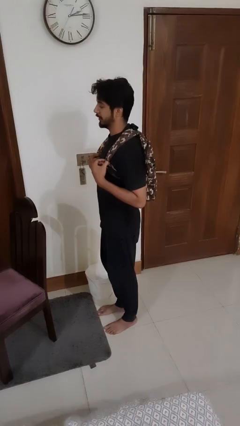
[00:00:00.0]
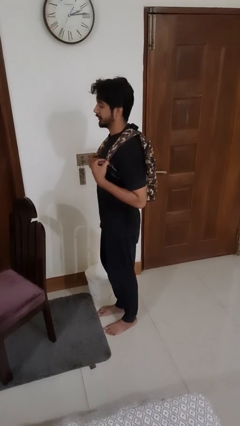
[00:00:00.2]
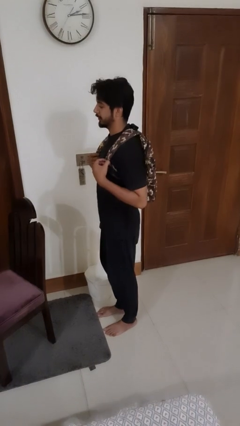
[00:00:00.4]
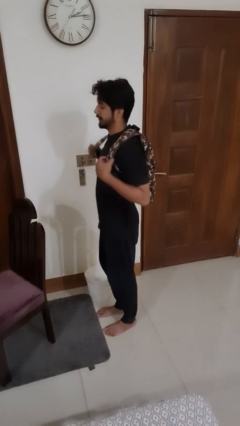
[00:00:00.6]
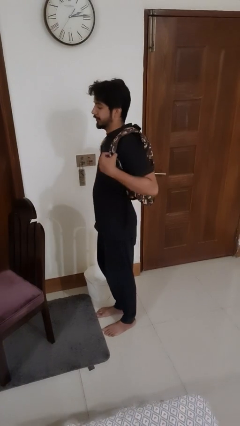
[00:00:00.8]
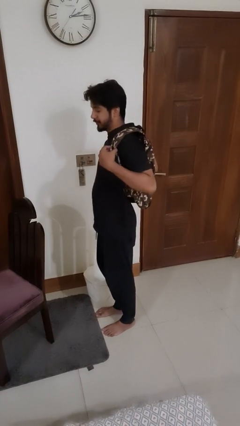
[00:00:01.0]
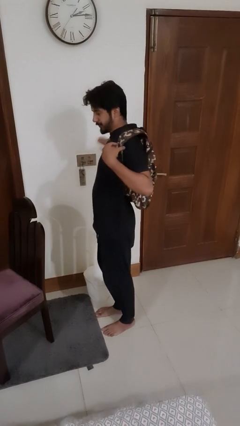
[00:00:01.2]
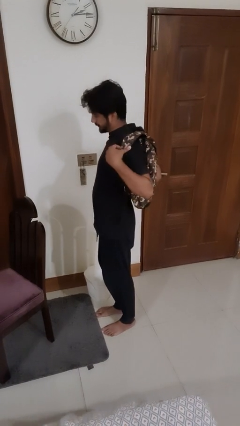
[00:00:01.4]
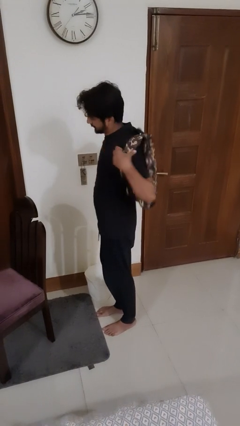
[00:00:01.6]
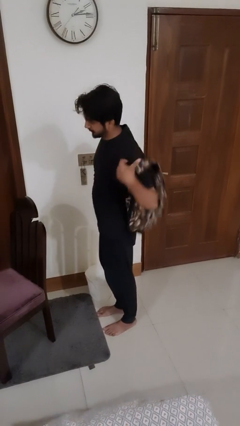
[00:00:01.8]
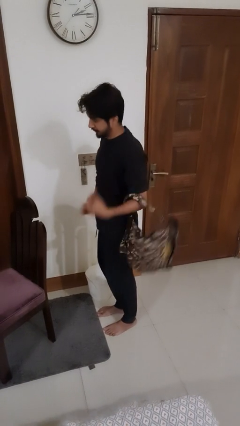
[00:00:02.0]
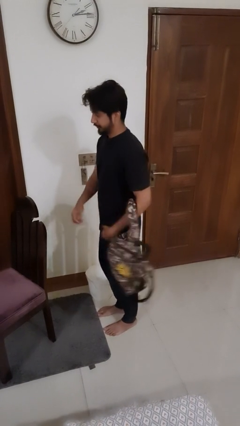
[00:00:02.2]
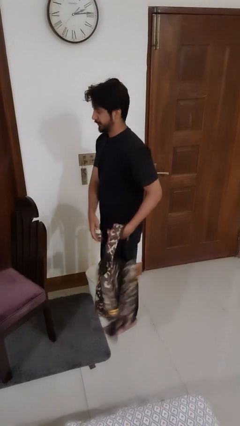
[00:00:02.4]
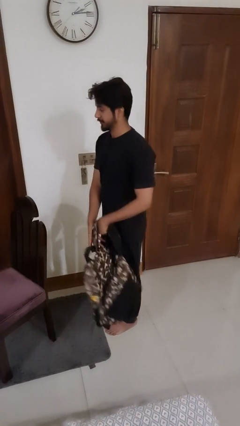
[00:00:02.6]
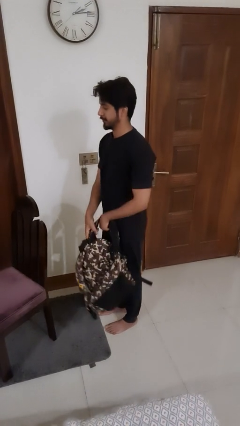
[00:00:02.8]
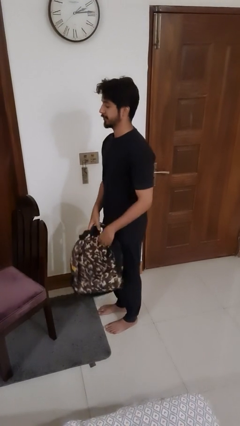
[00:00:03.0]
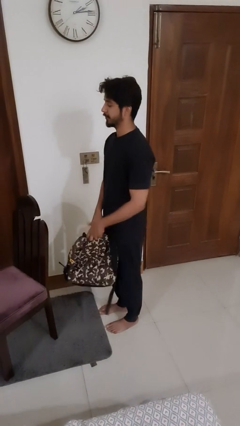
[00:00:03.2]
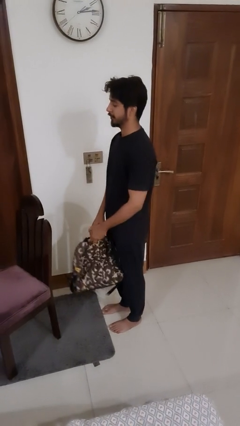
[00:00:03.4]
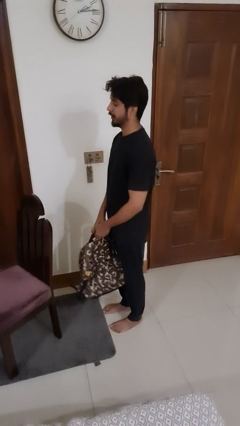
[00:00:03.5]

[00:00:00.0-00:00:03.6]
person takes off backpack

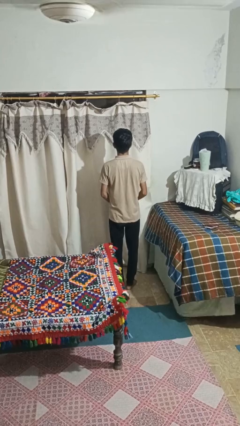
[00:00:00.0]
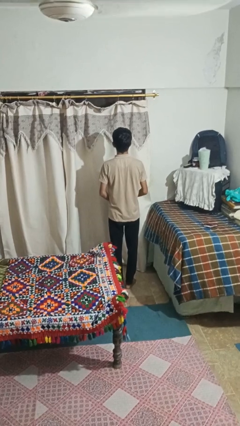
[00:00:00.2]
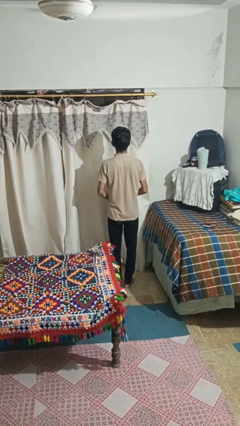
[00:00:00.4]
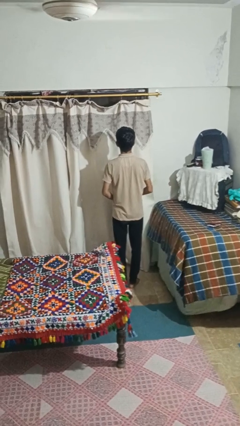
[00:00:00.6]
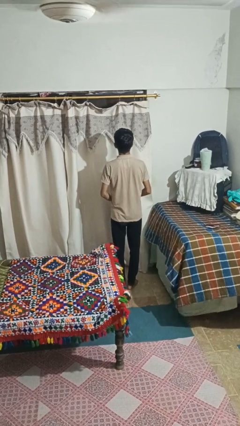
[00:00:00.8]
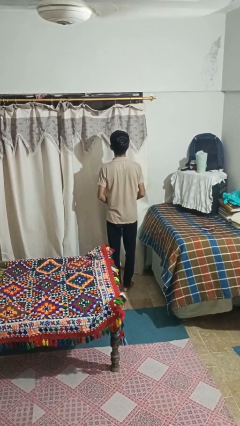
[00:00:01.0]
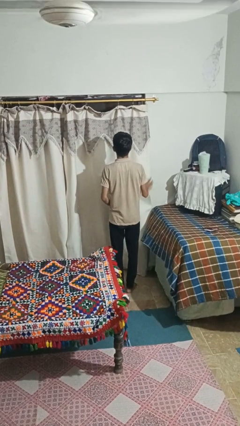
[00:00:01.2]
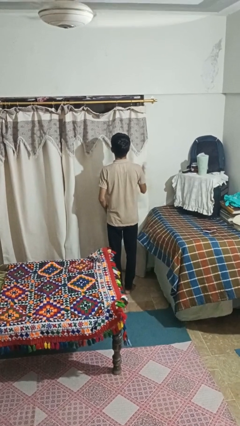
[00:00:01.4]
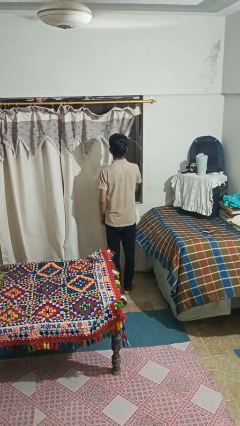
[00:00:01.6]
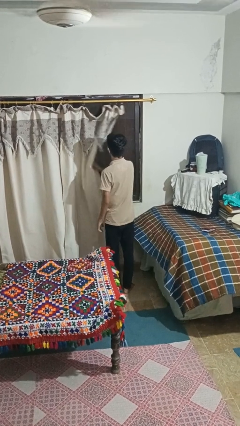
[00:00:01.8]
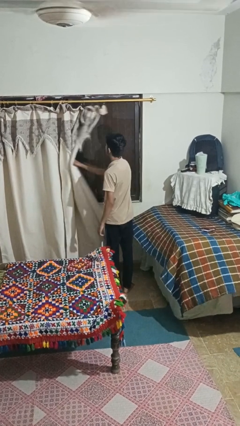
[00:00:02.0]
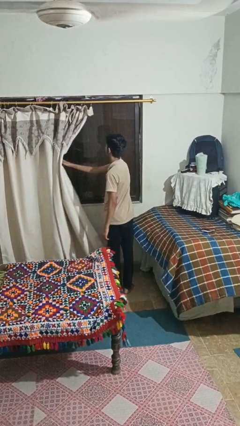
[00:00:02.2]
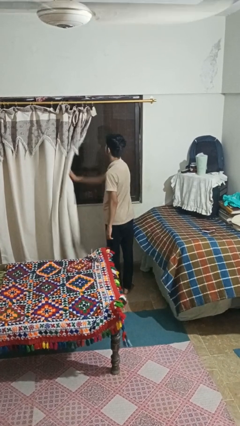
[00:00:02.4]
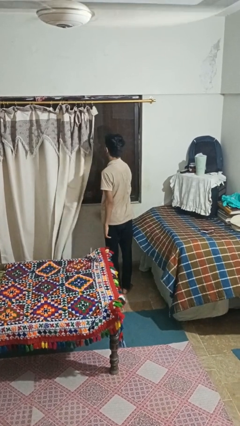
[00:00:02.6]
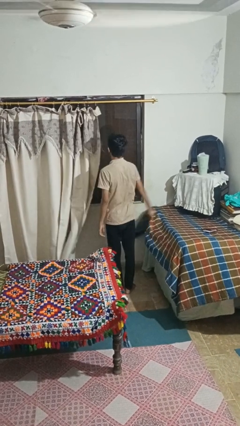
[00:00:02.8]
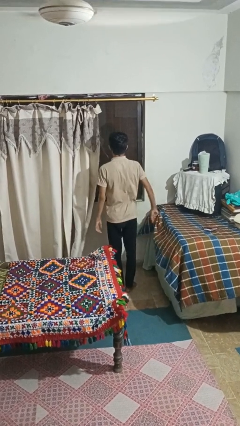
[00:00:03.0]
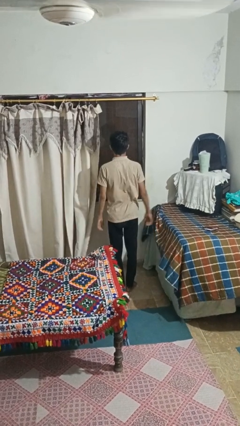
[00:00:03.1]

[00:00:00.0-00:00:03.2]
person opens curtains

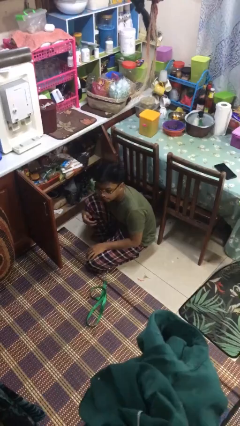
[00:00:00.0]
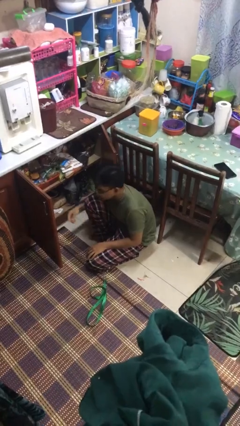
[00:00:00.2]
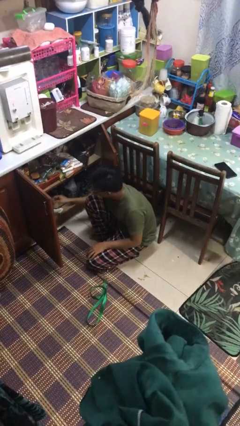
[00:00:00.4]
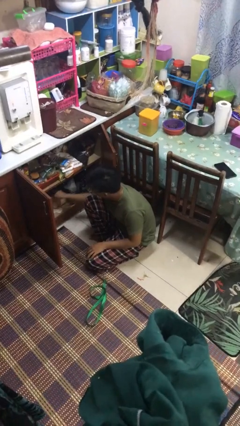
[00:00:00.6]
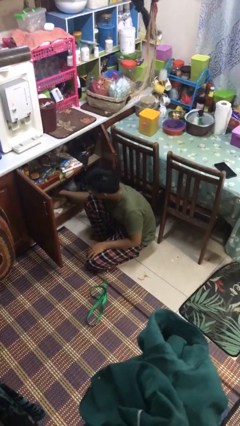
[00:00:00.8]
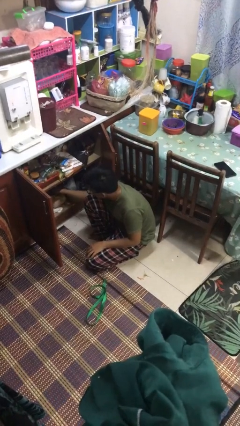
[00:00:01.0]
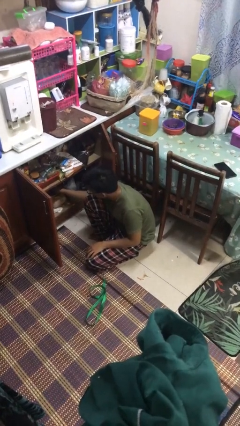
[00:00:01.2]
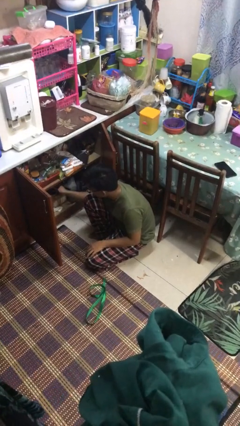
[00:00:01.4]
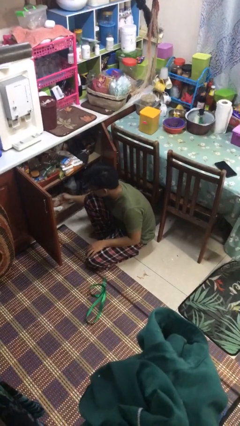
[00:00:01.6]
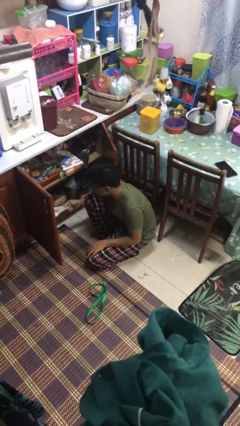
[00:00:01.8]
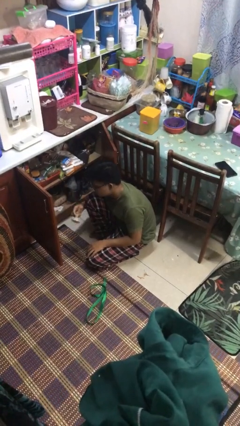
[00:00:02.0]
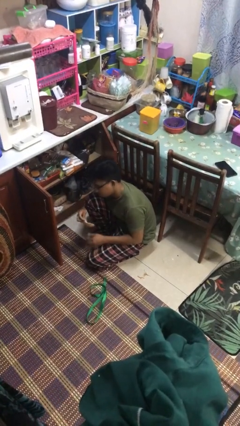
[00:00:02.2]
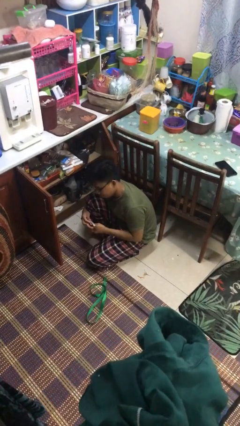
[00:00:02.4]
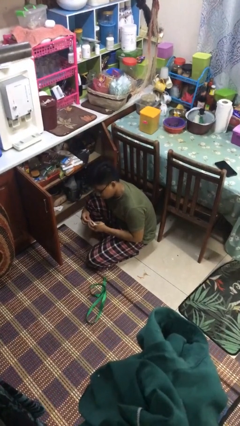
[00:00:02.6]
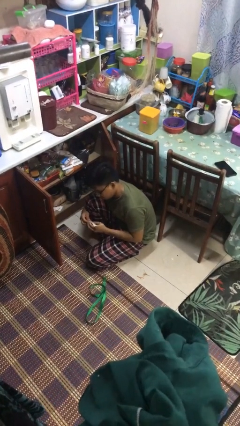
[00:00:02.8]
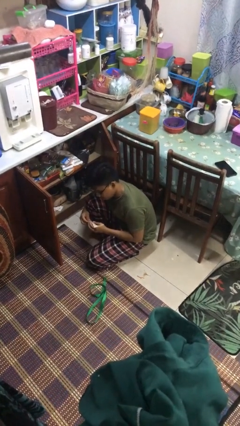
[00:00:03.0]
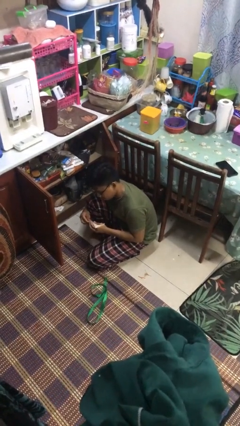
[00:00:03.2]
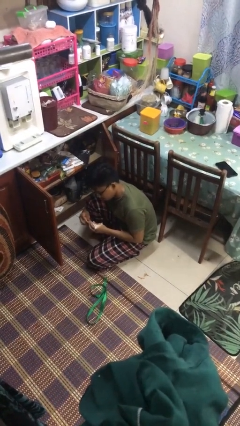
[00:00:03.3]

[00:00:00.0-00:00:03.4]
person takes object from kitchen drawer

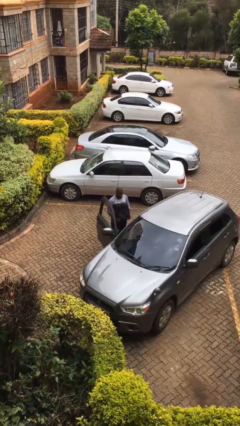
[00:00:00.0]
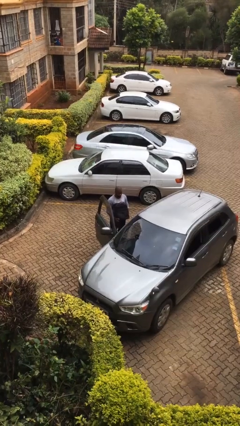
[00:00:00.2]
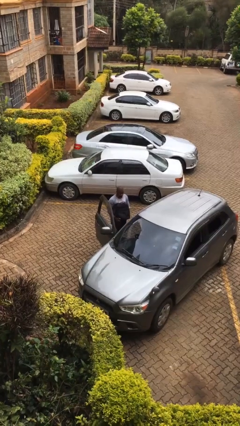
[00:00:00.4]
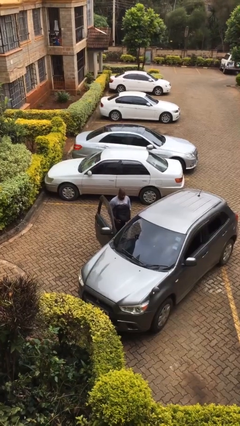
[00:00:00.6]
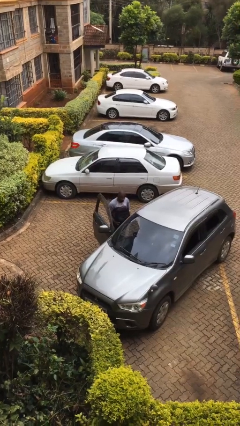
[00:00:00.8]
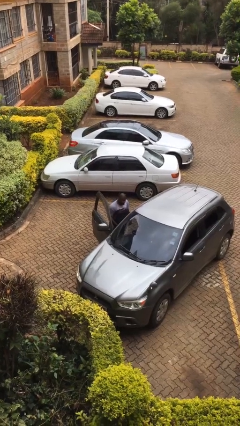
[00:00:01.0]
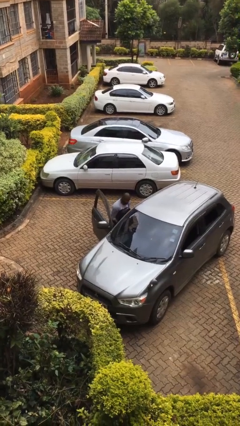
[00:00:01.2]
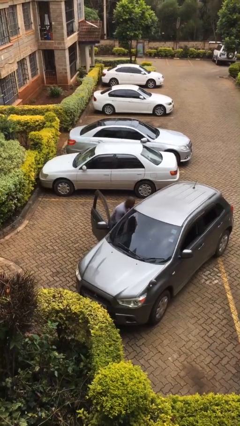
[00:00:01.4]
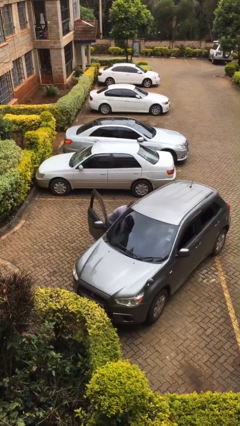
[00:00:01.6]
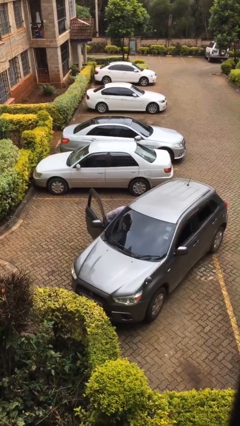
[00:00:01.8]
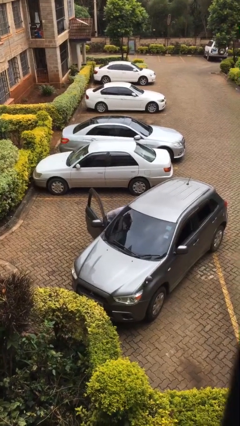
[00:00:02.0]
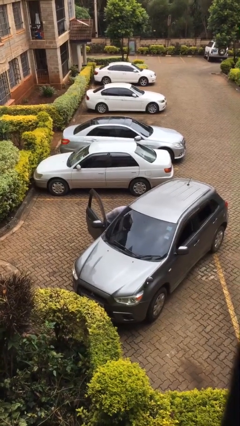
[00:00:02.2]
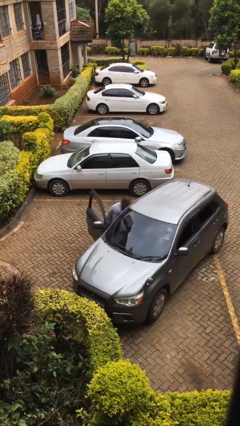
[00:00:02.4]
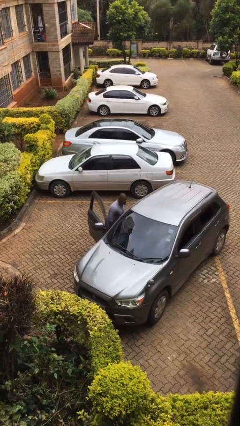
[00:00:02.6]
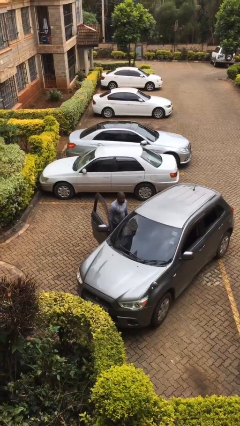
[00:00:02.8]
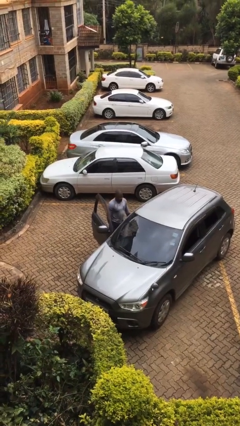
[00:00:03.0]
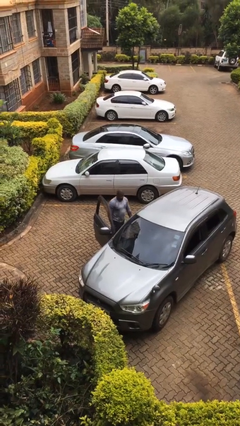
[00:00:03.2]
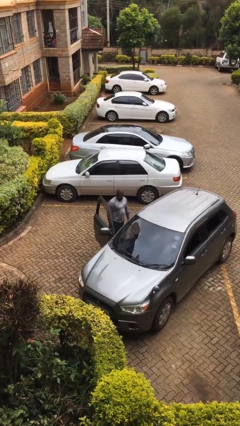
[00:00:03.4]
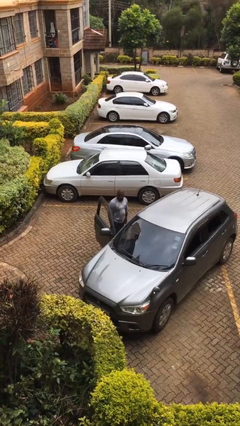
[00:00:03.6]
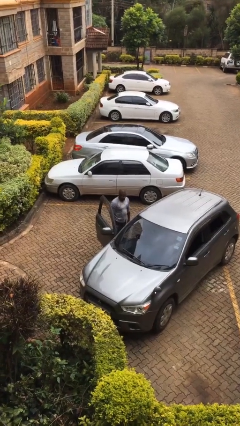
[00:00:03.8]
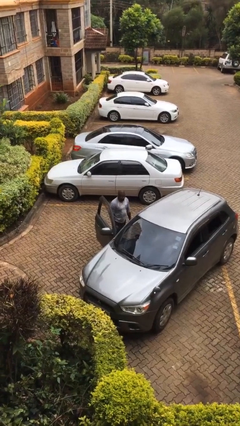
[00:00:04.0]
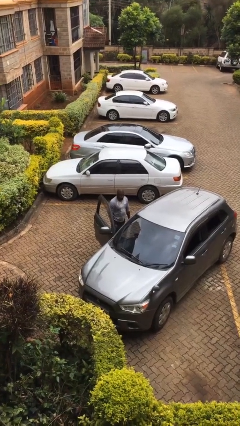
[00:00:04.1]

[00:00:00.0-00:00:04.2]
person loads car

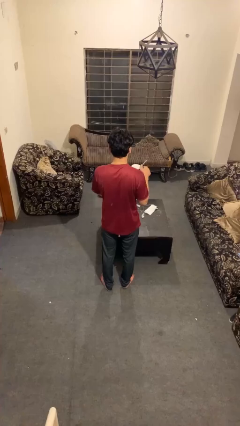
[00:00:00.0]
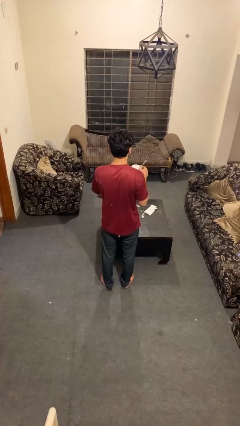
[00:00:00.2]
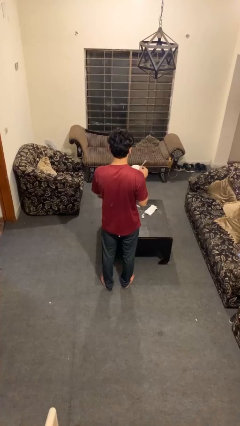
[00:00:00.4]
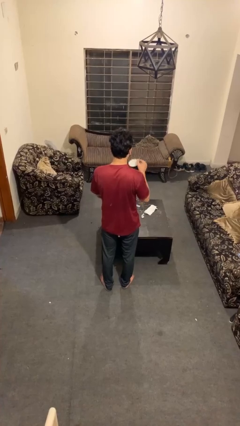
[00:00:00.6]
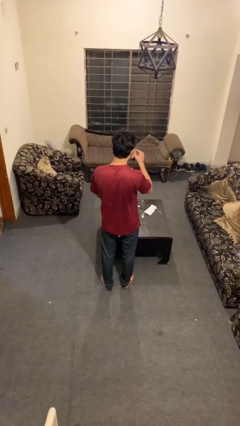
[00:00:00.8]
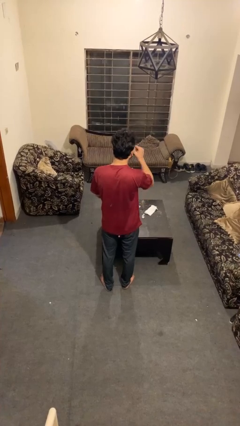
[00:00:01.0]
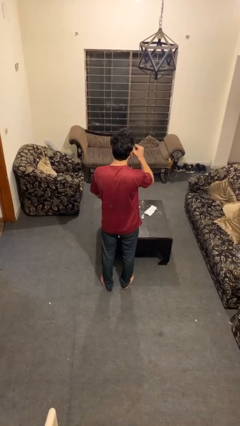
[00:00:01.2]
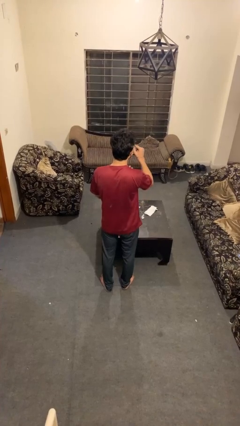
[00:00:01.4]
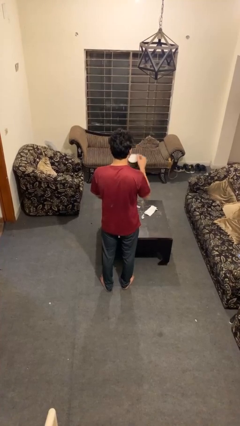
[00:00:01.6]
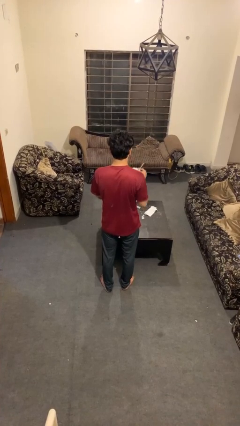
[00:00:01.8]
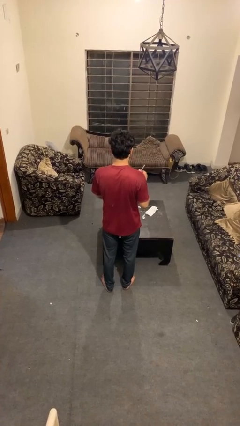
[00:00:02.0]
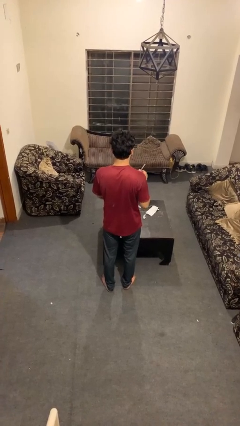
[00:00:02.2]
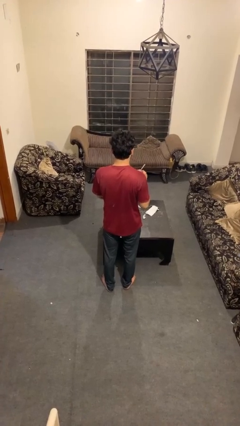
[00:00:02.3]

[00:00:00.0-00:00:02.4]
person drinks from mug

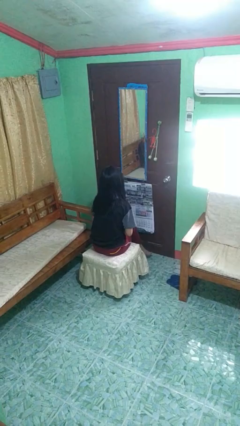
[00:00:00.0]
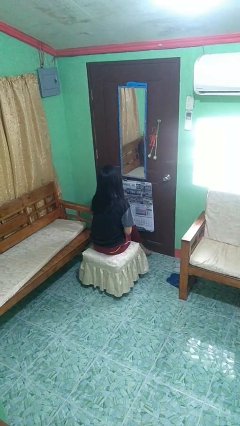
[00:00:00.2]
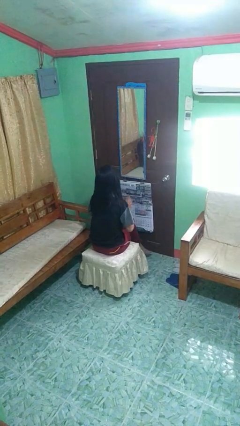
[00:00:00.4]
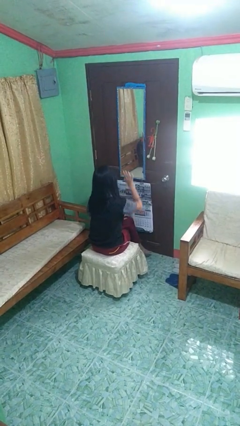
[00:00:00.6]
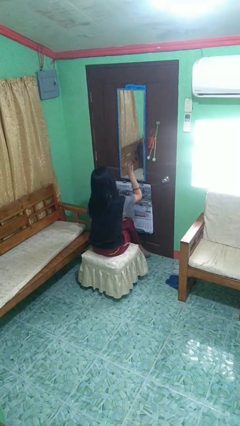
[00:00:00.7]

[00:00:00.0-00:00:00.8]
person gestures come here
